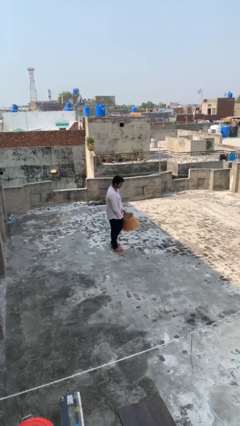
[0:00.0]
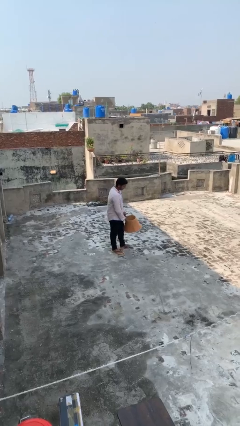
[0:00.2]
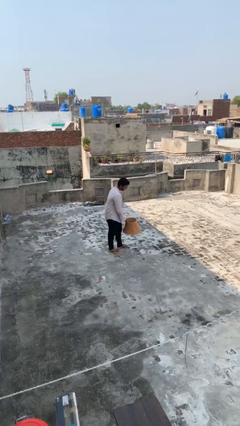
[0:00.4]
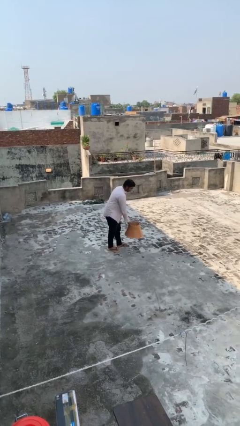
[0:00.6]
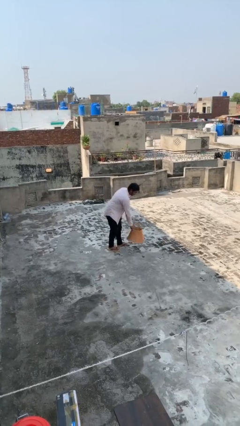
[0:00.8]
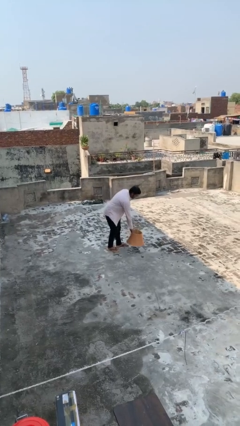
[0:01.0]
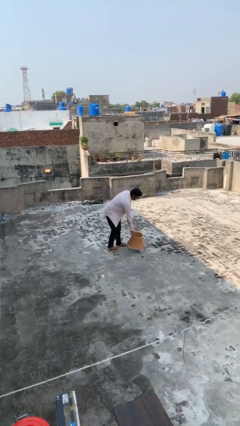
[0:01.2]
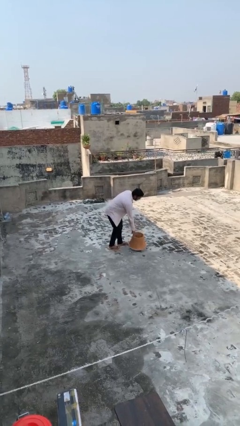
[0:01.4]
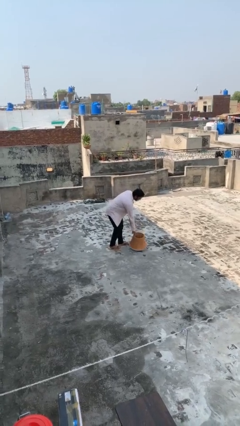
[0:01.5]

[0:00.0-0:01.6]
person puts down object on floor

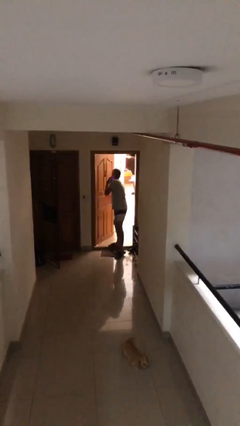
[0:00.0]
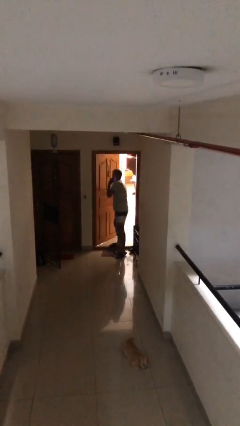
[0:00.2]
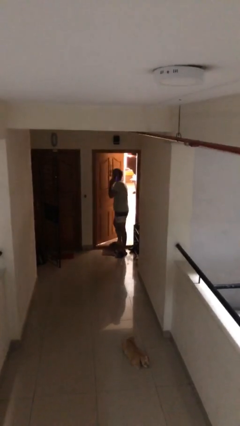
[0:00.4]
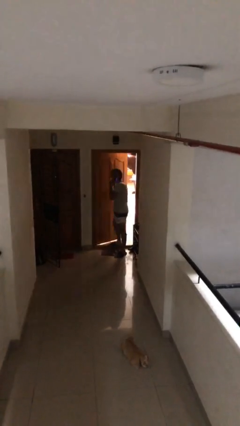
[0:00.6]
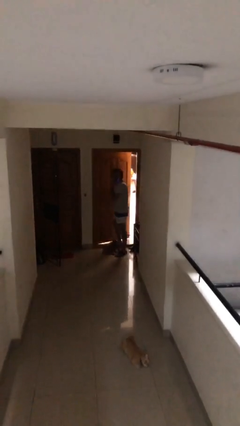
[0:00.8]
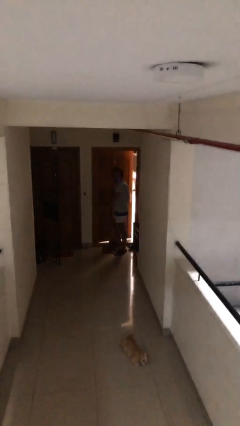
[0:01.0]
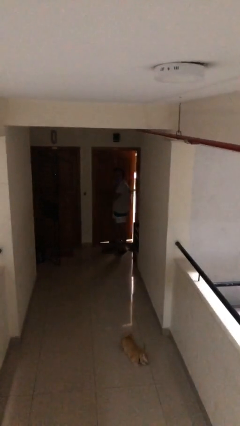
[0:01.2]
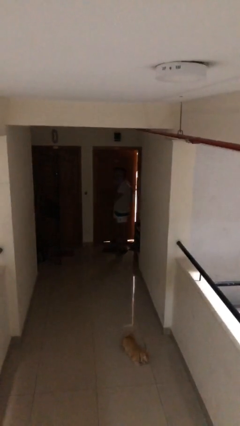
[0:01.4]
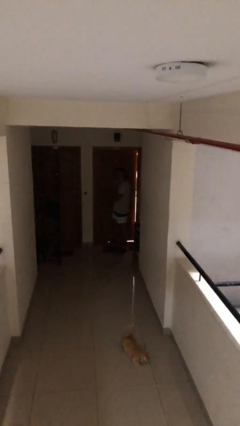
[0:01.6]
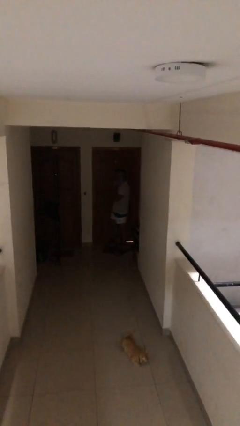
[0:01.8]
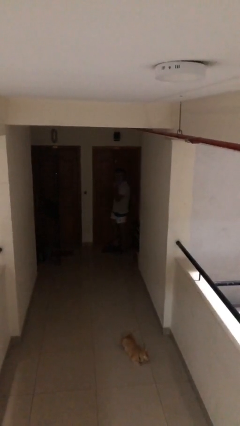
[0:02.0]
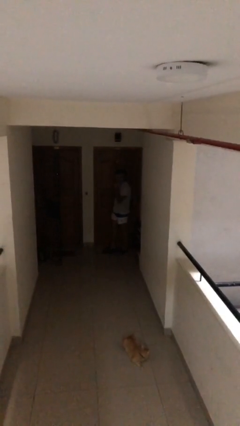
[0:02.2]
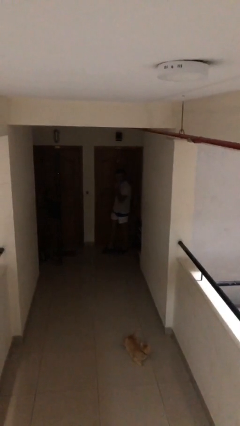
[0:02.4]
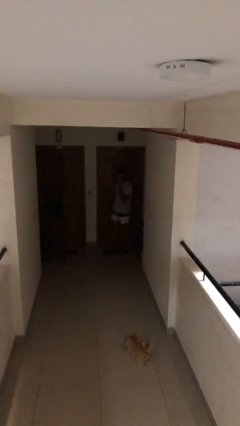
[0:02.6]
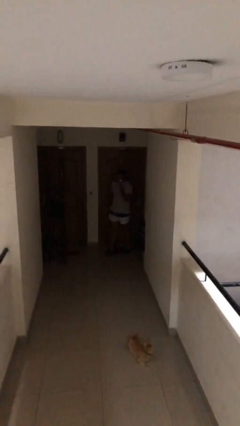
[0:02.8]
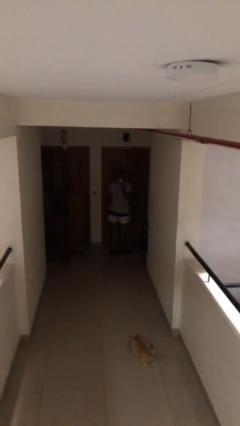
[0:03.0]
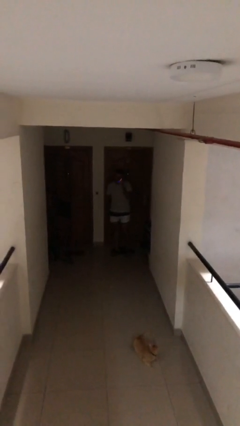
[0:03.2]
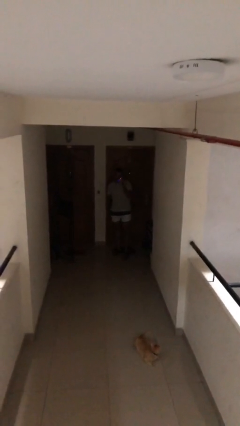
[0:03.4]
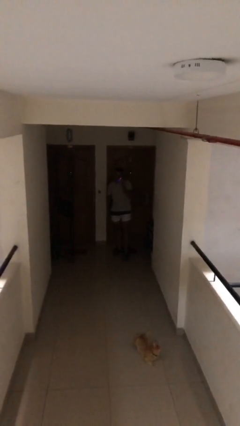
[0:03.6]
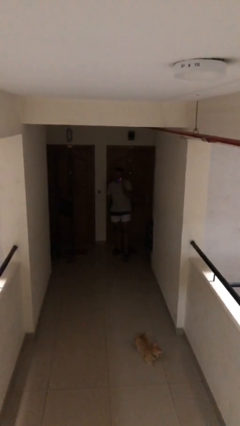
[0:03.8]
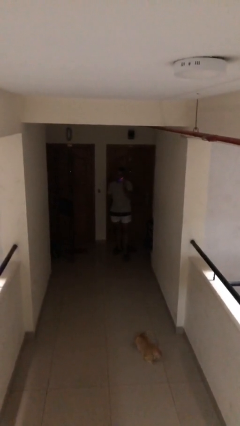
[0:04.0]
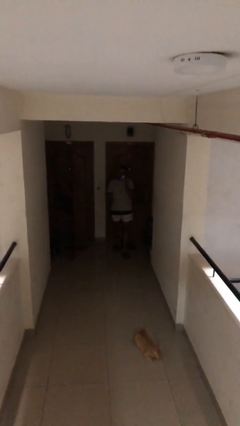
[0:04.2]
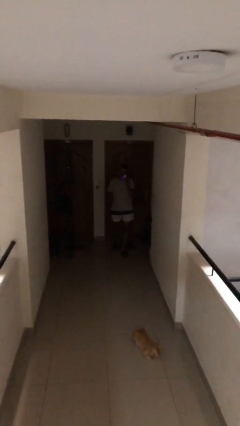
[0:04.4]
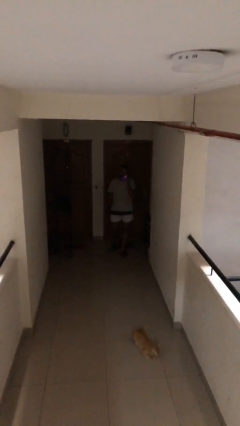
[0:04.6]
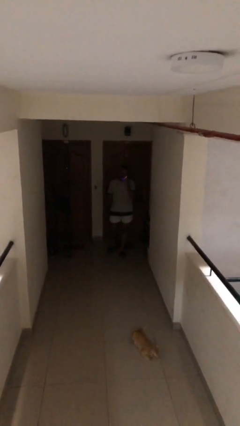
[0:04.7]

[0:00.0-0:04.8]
person closes facility door

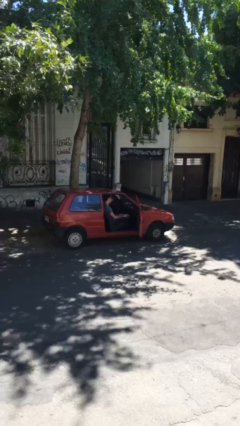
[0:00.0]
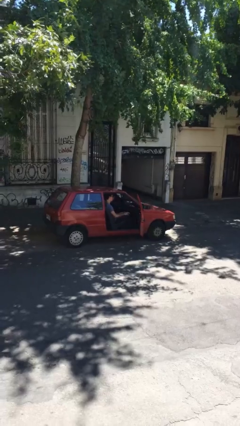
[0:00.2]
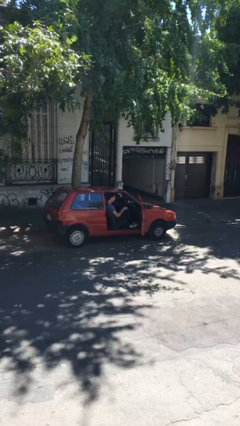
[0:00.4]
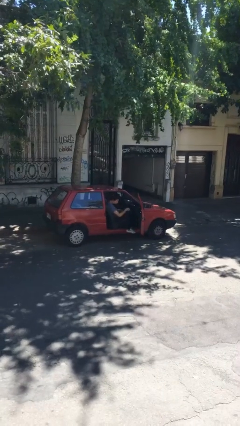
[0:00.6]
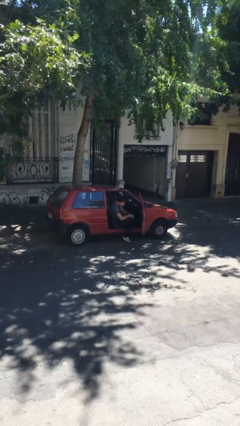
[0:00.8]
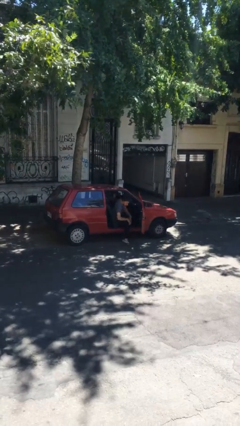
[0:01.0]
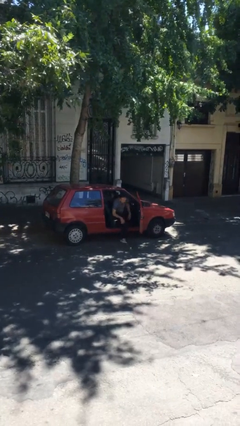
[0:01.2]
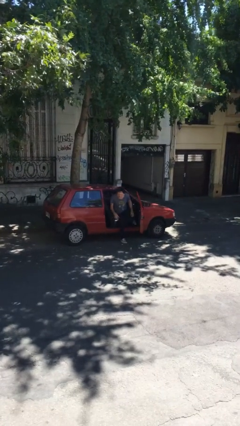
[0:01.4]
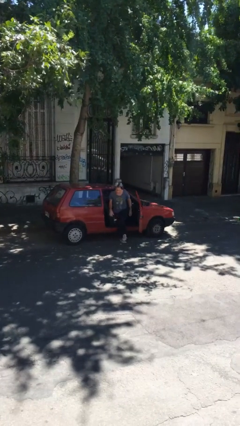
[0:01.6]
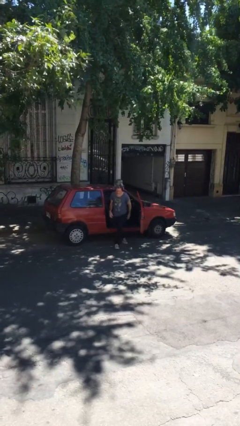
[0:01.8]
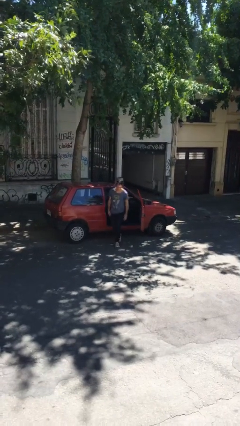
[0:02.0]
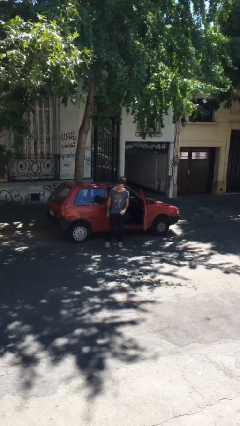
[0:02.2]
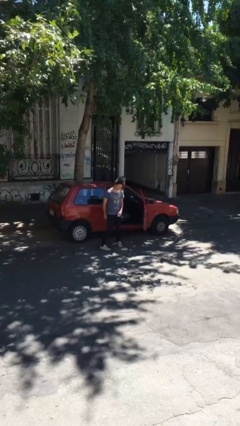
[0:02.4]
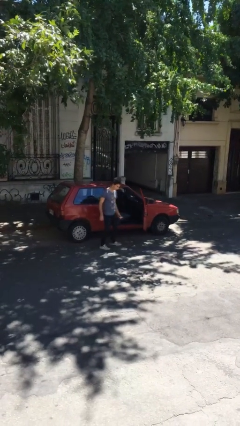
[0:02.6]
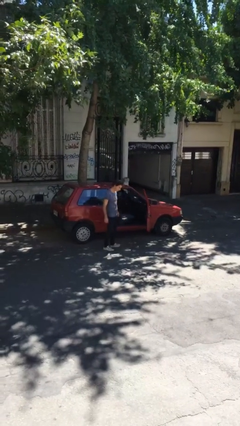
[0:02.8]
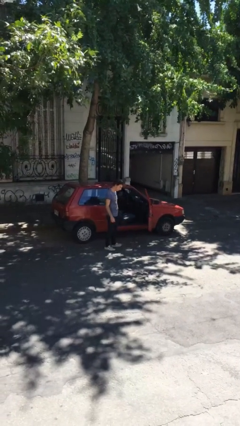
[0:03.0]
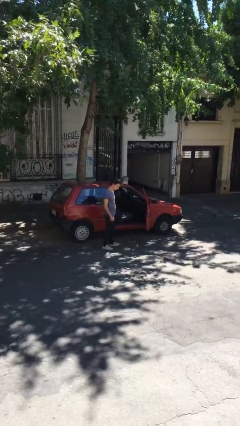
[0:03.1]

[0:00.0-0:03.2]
person exits car

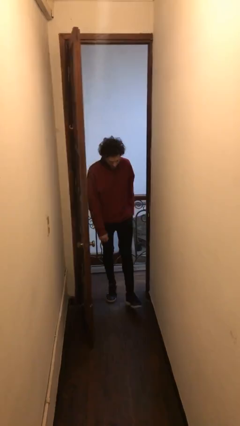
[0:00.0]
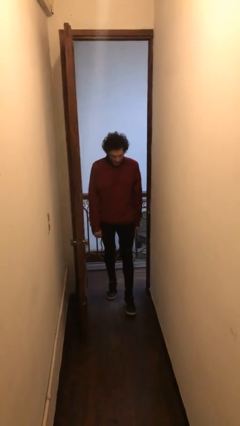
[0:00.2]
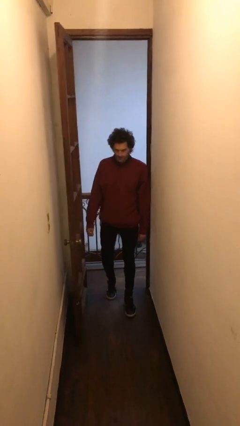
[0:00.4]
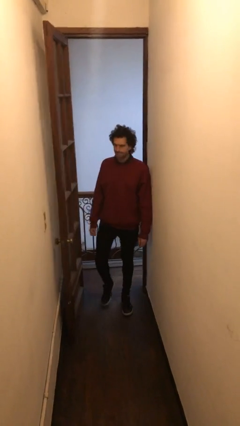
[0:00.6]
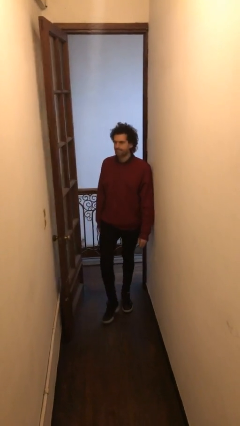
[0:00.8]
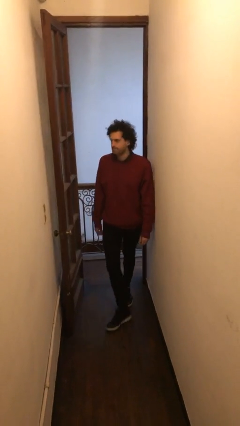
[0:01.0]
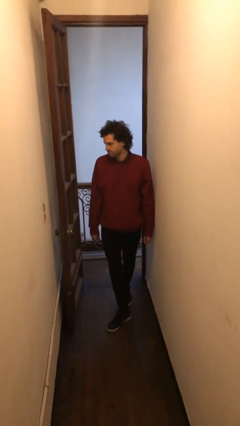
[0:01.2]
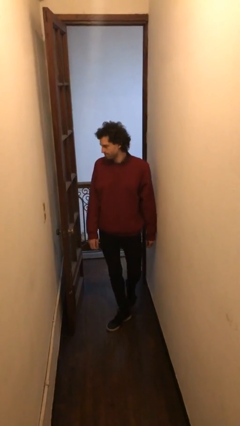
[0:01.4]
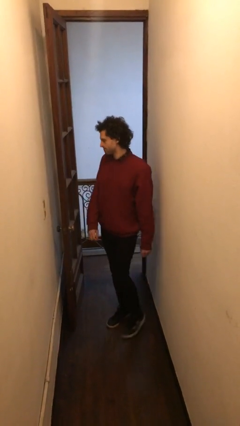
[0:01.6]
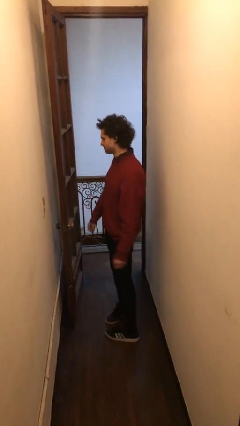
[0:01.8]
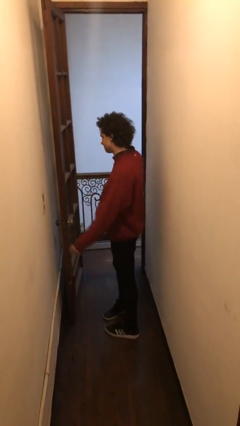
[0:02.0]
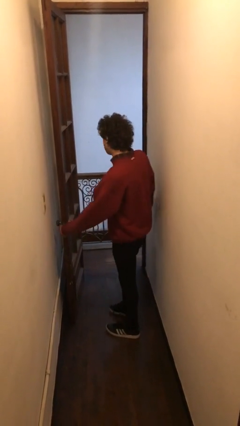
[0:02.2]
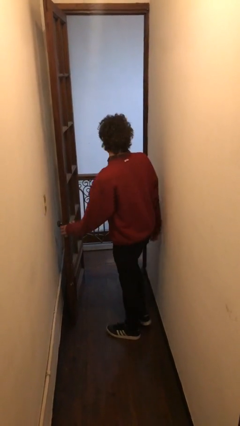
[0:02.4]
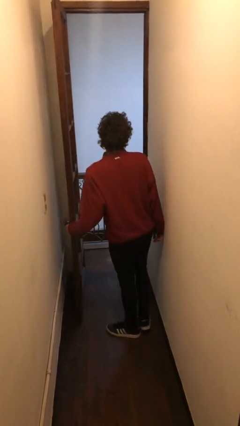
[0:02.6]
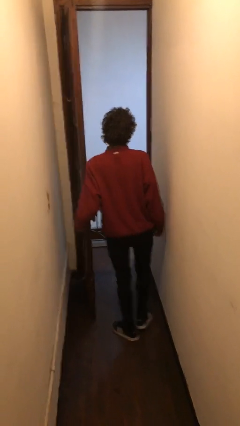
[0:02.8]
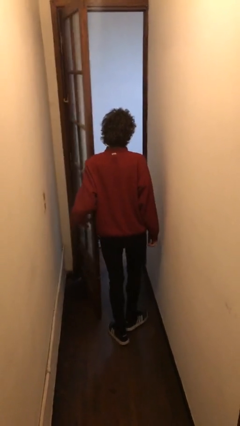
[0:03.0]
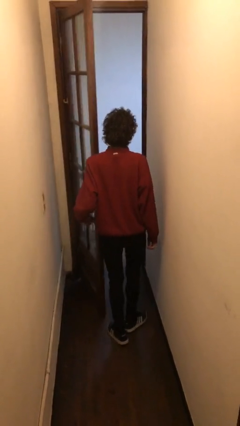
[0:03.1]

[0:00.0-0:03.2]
person enters scene through structure

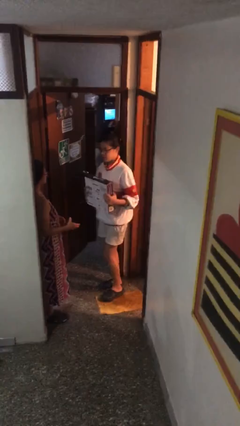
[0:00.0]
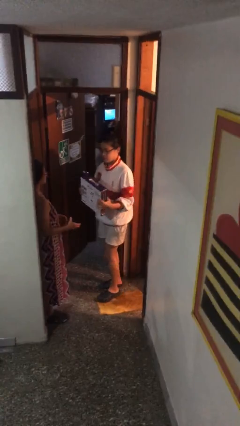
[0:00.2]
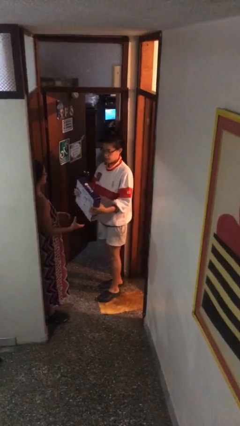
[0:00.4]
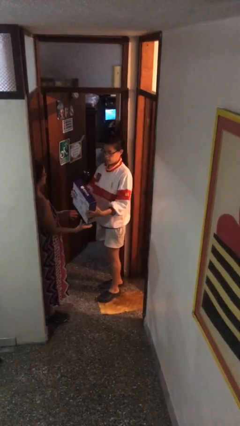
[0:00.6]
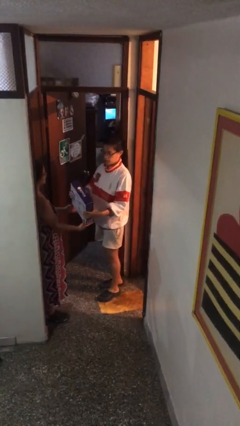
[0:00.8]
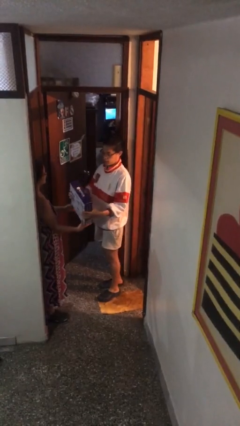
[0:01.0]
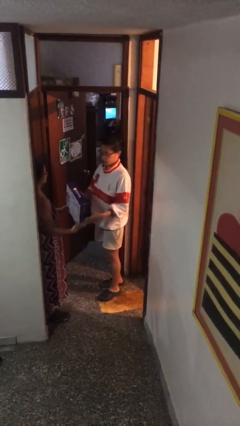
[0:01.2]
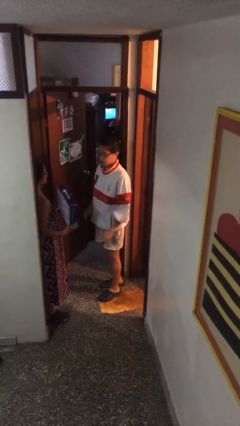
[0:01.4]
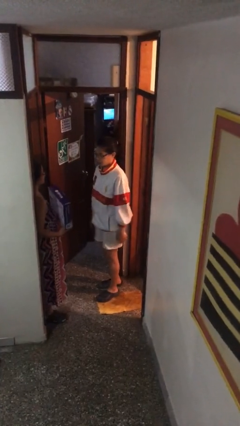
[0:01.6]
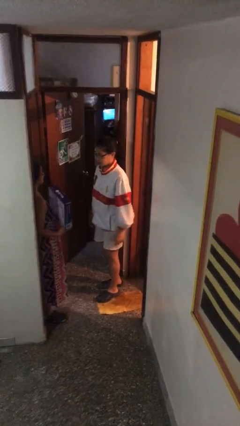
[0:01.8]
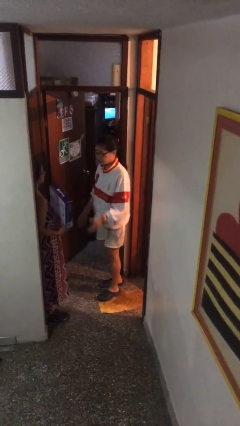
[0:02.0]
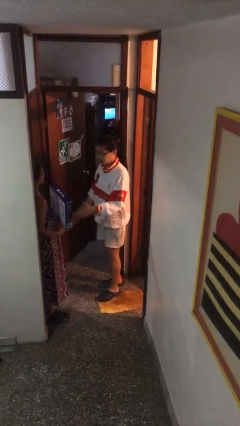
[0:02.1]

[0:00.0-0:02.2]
person transfers object to person

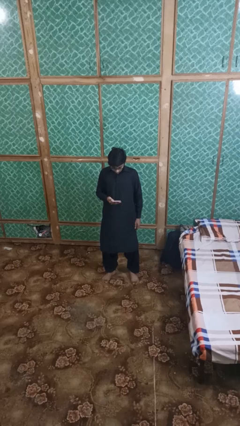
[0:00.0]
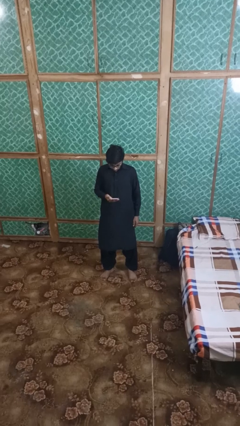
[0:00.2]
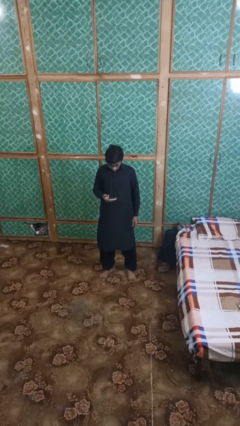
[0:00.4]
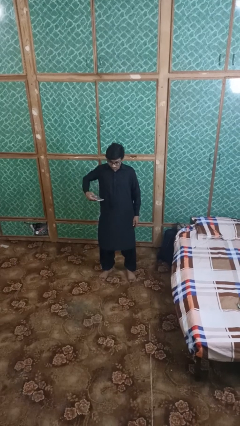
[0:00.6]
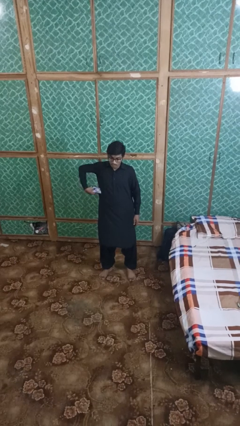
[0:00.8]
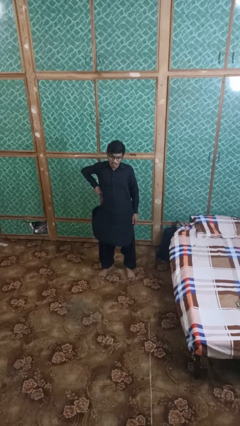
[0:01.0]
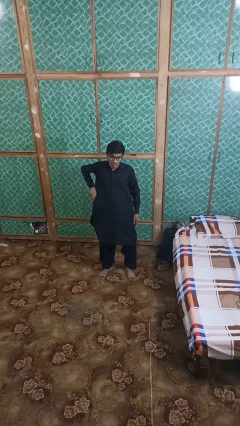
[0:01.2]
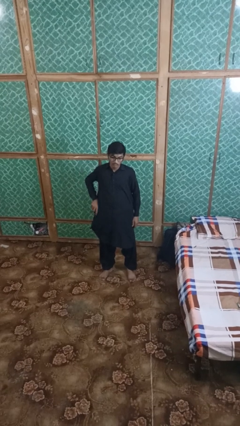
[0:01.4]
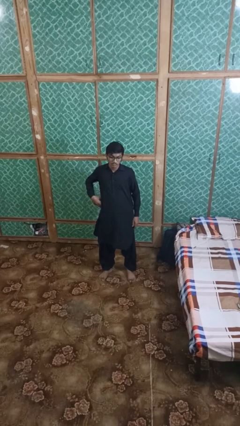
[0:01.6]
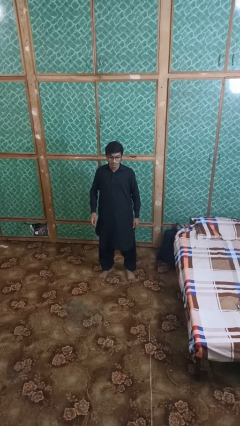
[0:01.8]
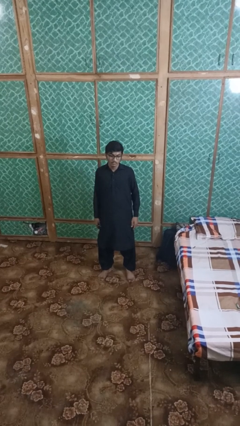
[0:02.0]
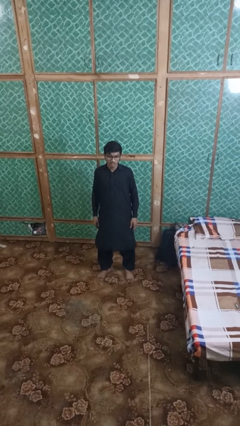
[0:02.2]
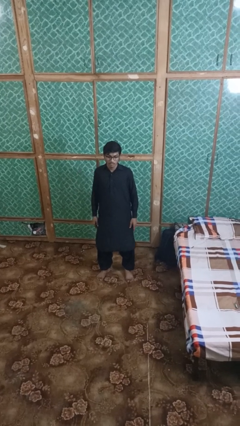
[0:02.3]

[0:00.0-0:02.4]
person puts phone into pocket
